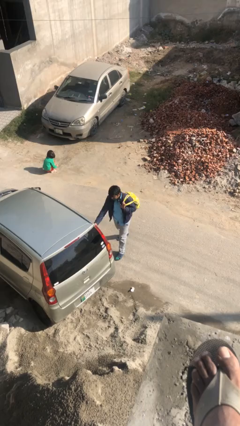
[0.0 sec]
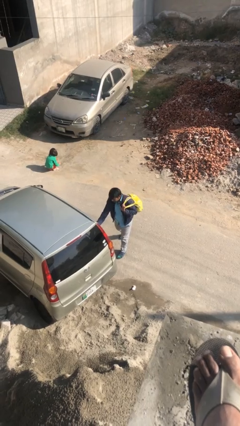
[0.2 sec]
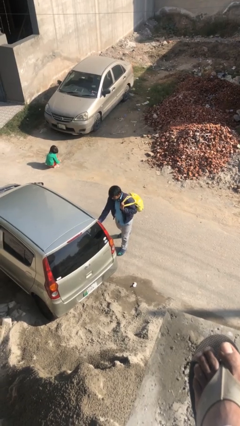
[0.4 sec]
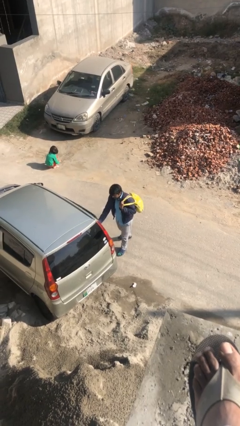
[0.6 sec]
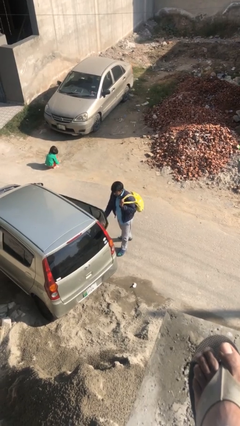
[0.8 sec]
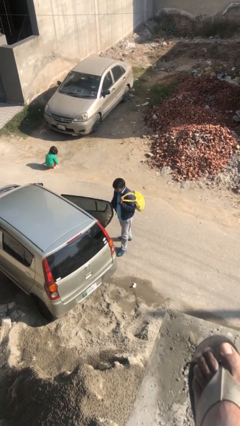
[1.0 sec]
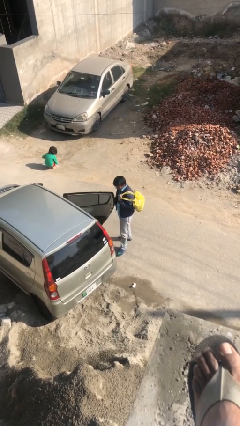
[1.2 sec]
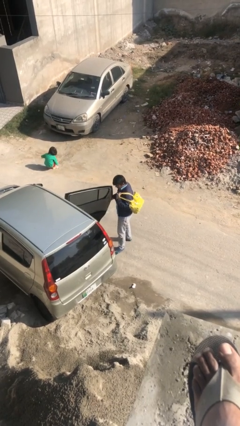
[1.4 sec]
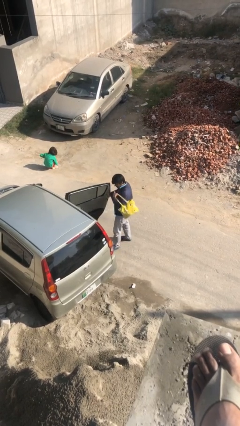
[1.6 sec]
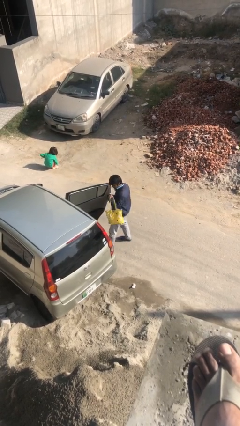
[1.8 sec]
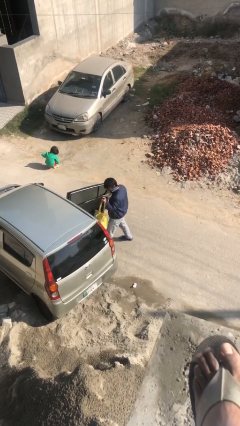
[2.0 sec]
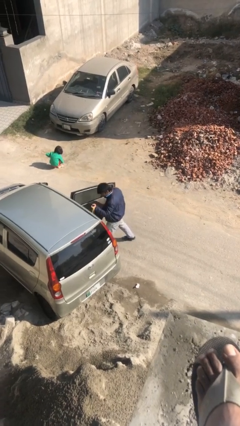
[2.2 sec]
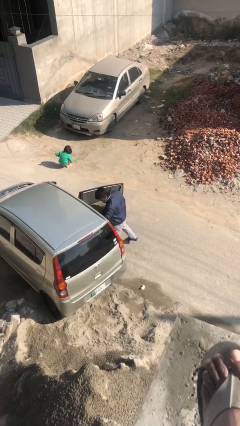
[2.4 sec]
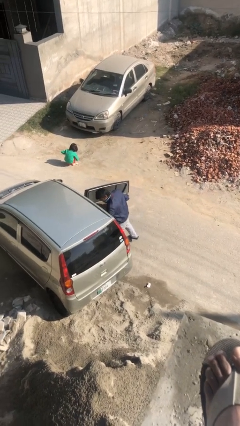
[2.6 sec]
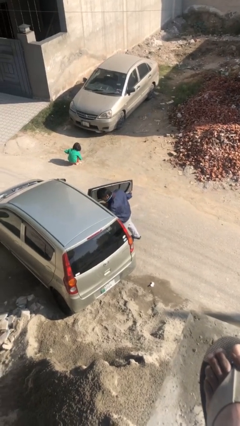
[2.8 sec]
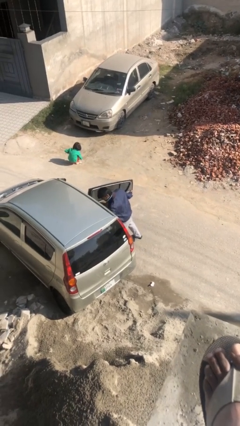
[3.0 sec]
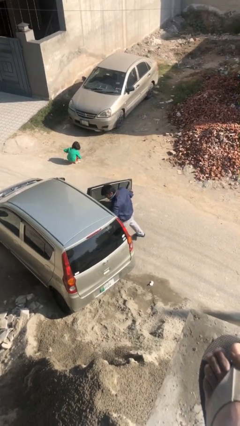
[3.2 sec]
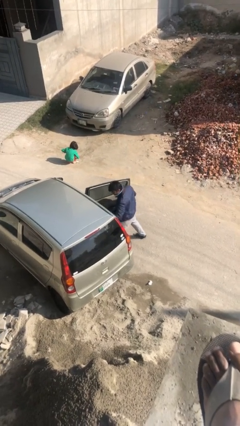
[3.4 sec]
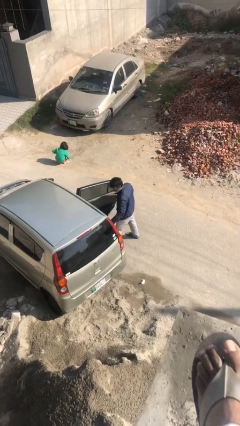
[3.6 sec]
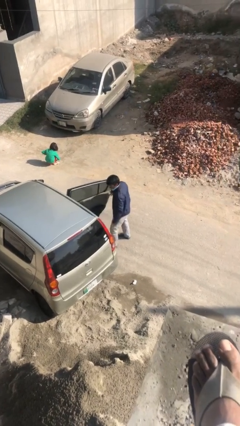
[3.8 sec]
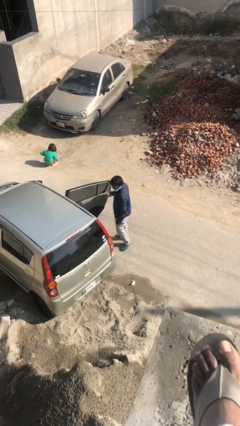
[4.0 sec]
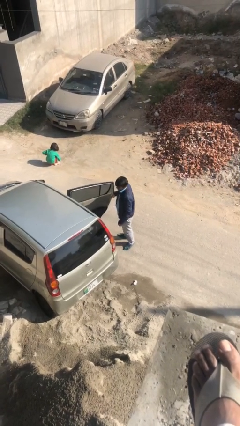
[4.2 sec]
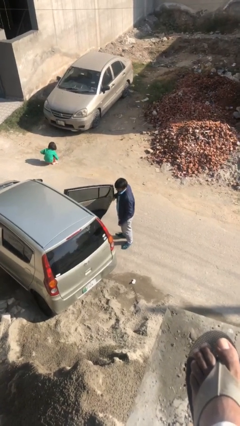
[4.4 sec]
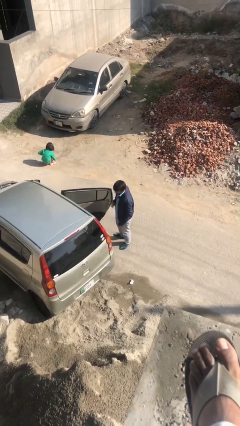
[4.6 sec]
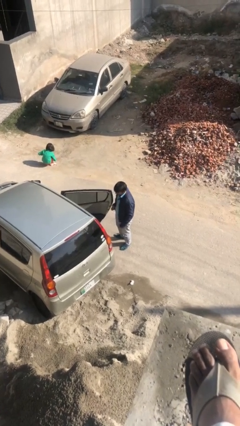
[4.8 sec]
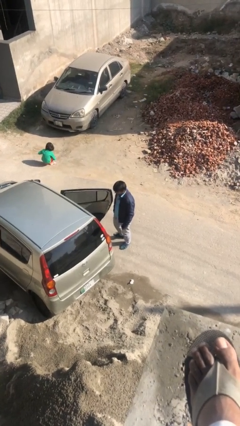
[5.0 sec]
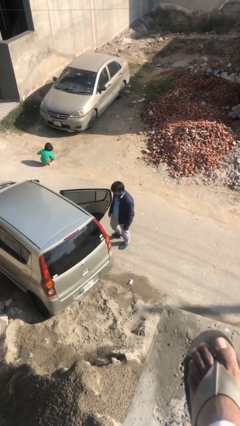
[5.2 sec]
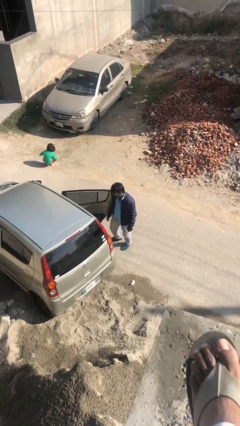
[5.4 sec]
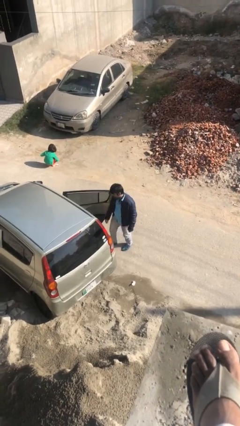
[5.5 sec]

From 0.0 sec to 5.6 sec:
person loads car

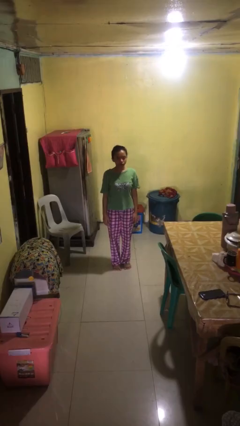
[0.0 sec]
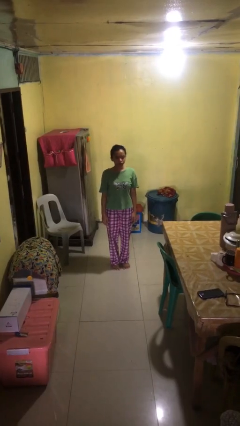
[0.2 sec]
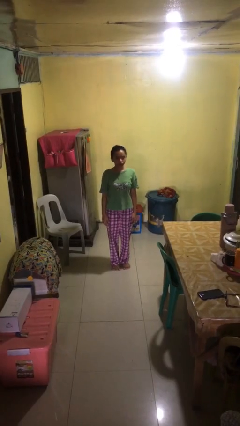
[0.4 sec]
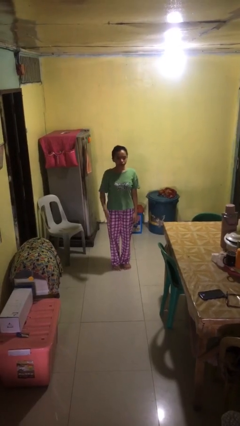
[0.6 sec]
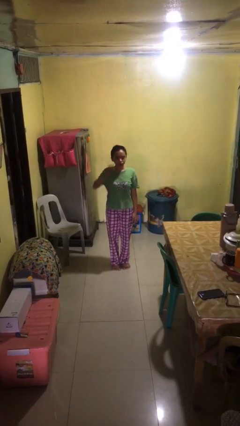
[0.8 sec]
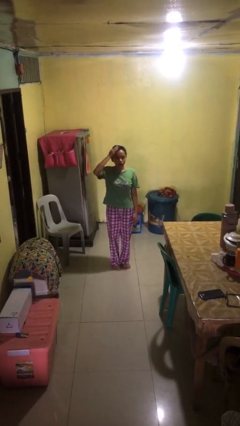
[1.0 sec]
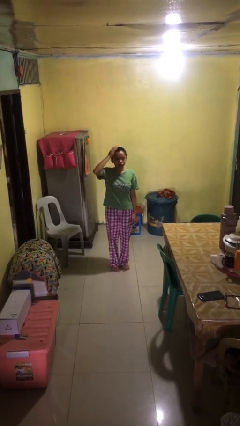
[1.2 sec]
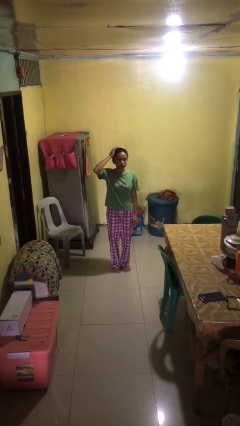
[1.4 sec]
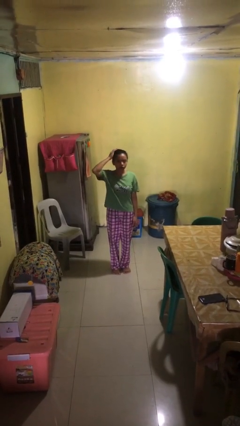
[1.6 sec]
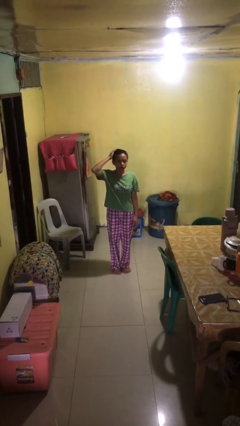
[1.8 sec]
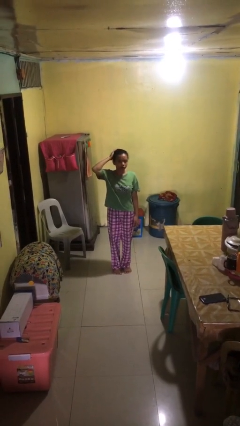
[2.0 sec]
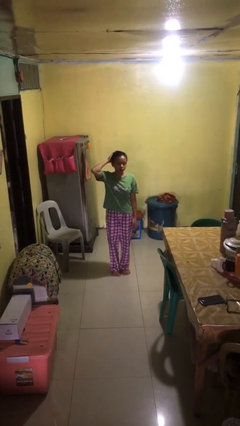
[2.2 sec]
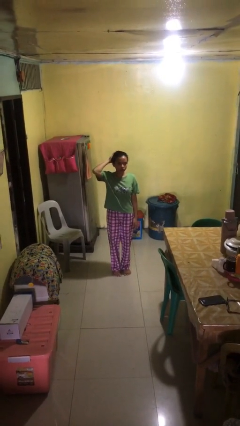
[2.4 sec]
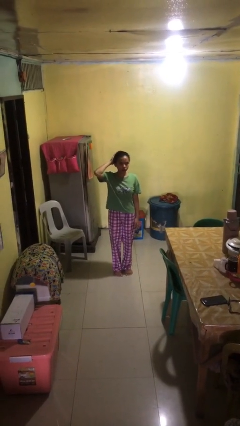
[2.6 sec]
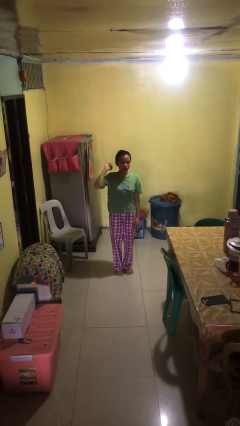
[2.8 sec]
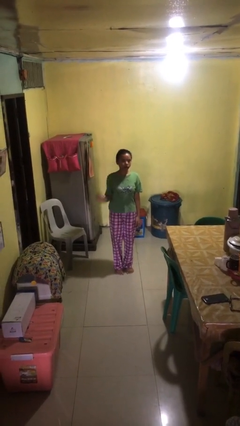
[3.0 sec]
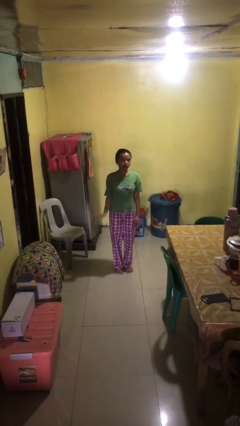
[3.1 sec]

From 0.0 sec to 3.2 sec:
person pats head

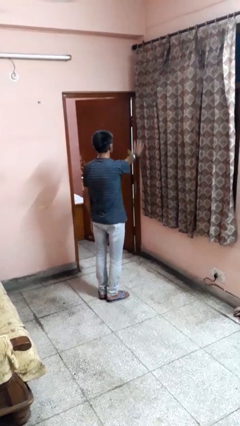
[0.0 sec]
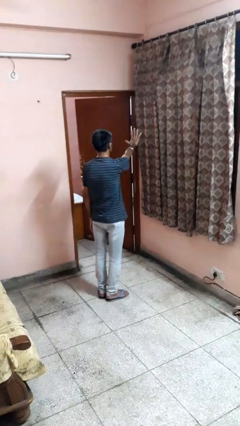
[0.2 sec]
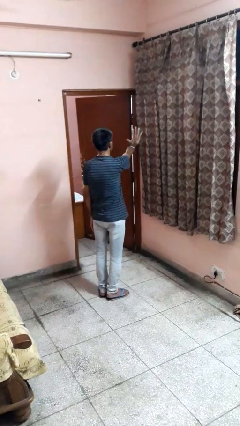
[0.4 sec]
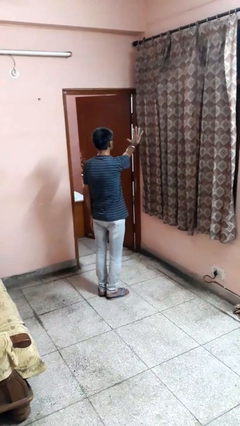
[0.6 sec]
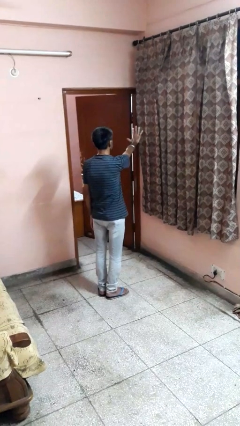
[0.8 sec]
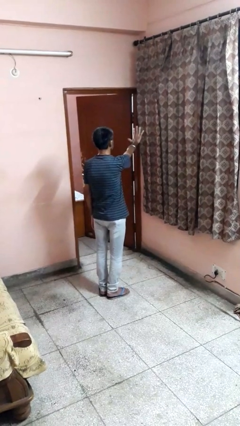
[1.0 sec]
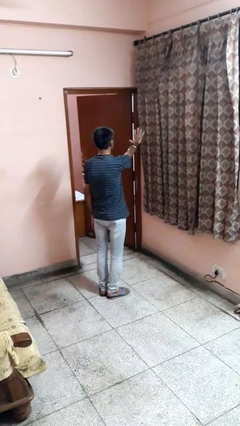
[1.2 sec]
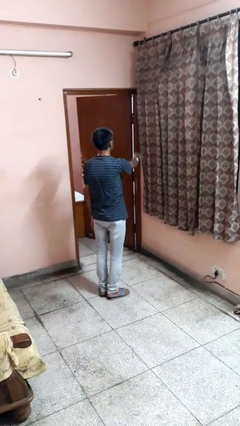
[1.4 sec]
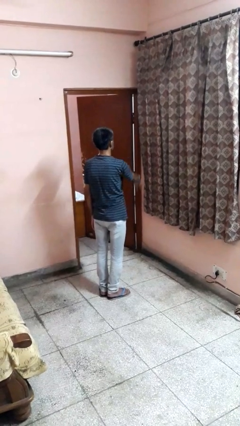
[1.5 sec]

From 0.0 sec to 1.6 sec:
person gestures number five

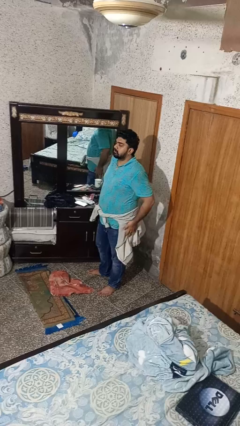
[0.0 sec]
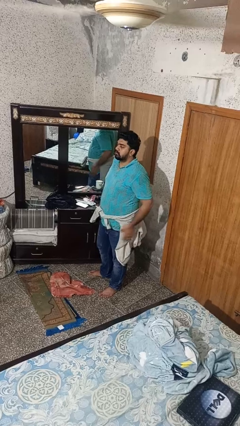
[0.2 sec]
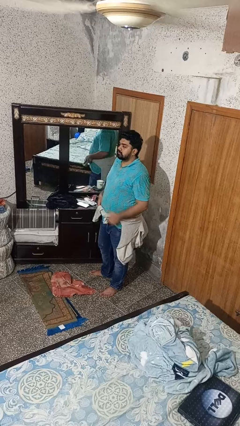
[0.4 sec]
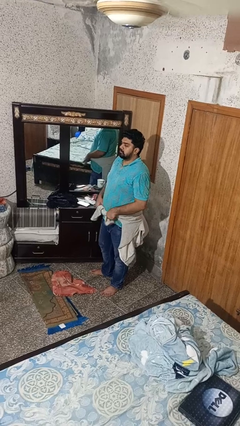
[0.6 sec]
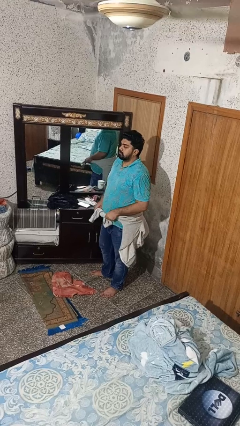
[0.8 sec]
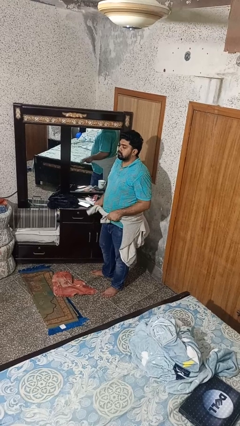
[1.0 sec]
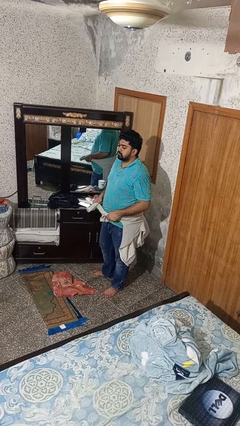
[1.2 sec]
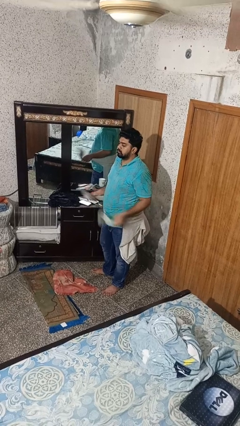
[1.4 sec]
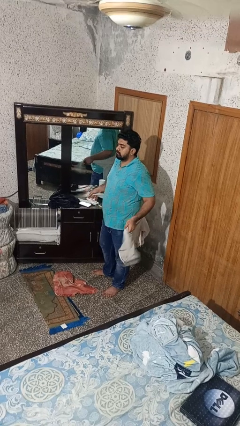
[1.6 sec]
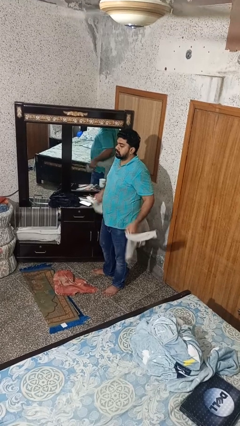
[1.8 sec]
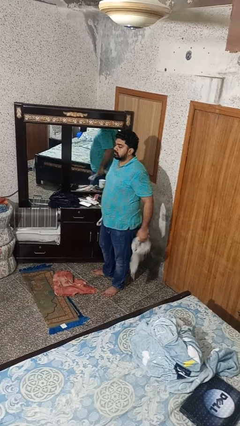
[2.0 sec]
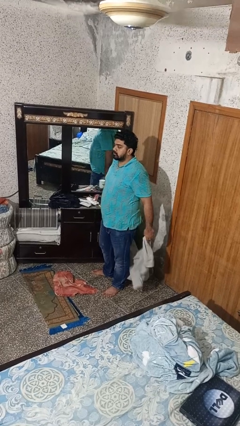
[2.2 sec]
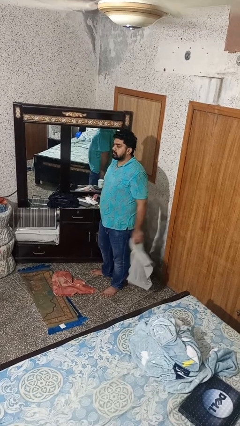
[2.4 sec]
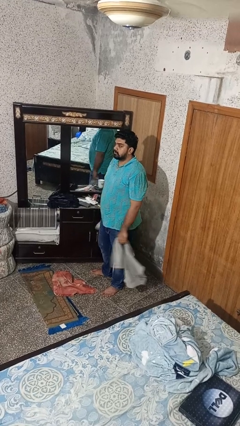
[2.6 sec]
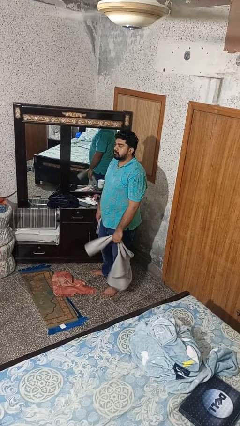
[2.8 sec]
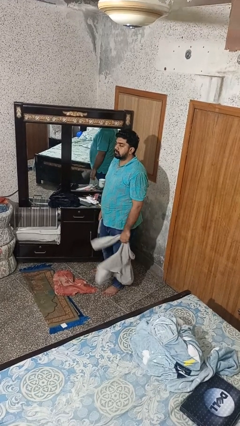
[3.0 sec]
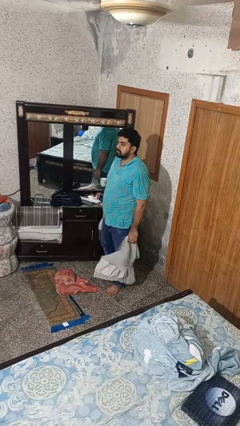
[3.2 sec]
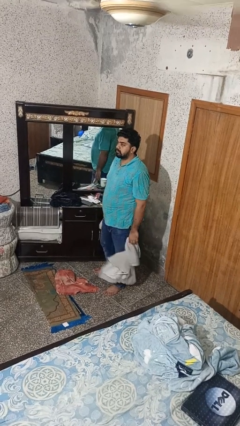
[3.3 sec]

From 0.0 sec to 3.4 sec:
person unties jacket around waist

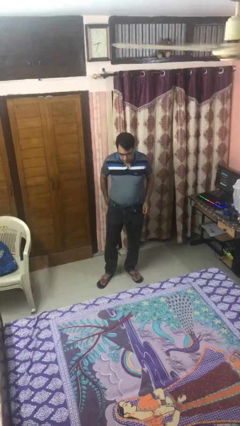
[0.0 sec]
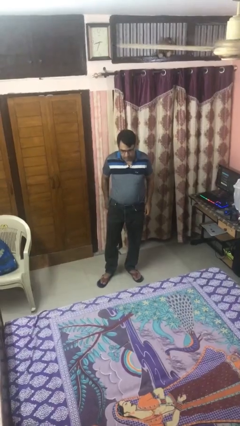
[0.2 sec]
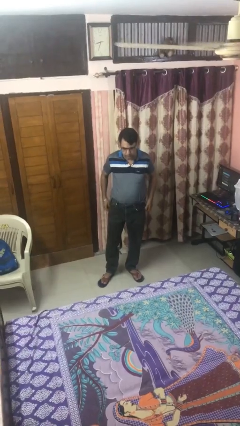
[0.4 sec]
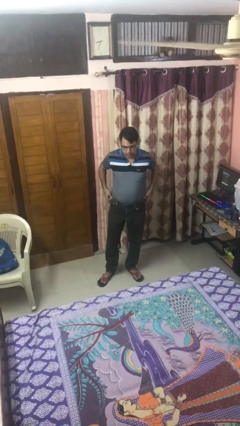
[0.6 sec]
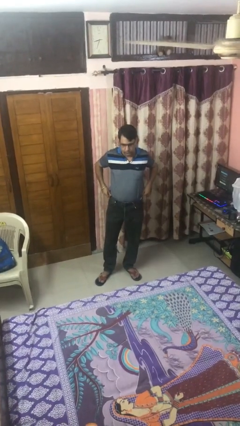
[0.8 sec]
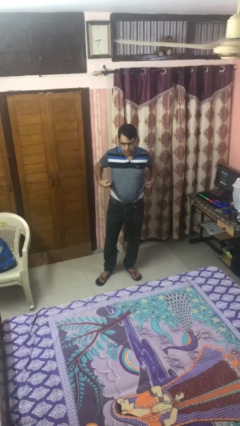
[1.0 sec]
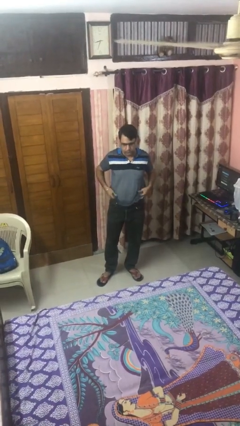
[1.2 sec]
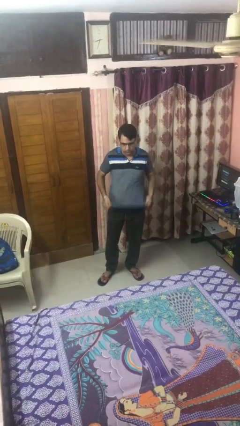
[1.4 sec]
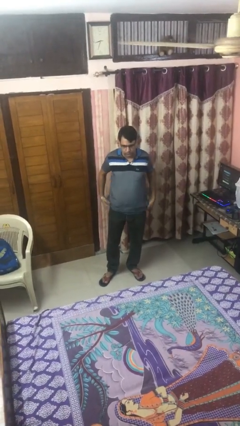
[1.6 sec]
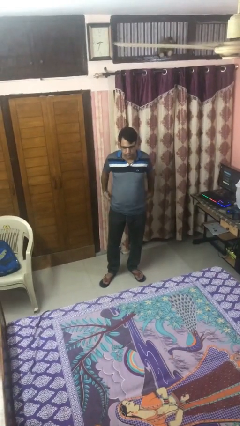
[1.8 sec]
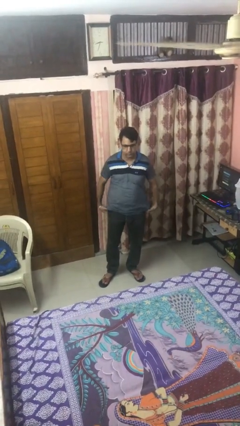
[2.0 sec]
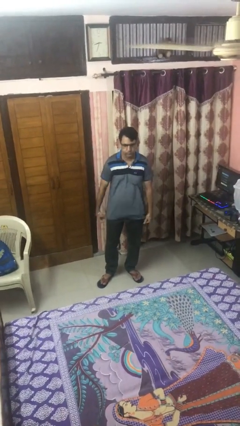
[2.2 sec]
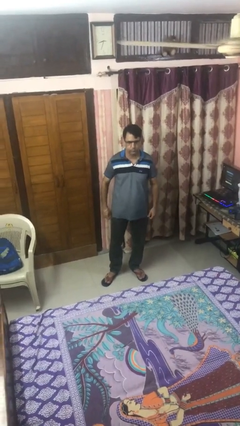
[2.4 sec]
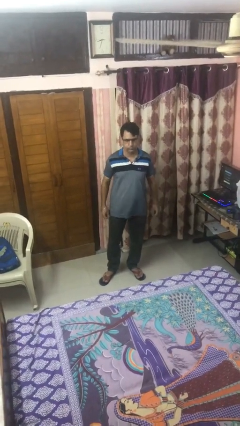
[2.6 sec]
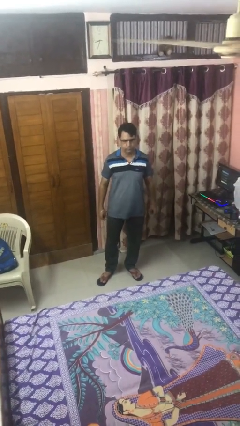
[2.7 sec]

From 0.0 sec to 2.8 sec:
person untucks shirt

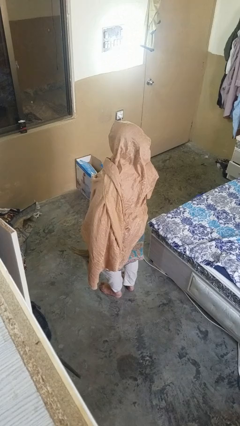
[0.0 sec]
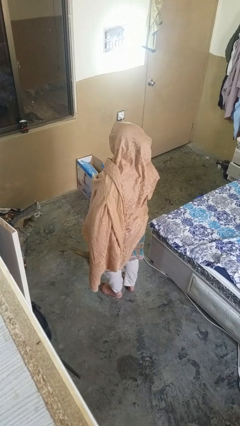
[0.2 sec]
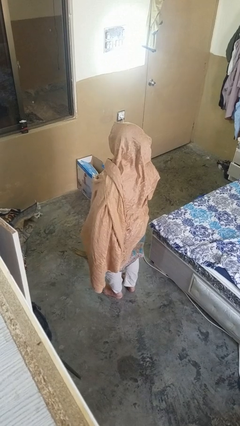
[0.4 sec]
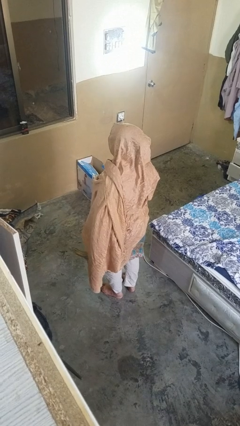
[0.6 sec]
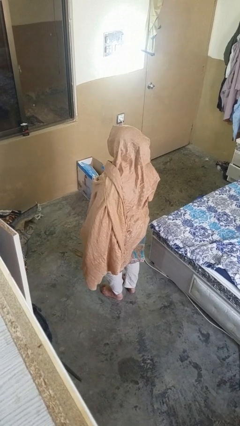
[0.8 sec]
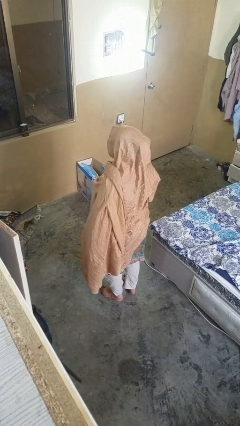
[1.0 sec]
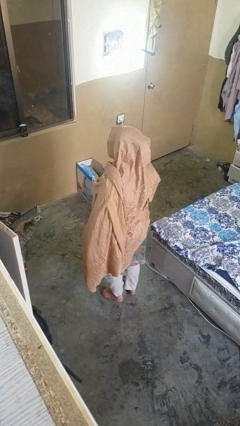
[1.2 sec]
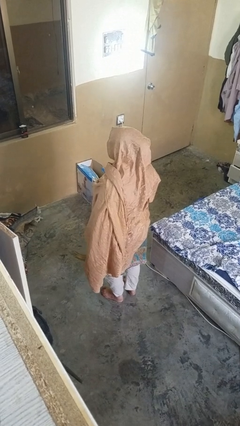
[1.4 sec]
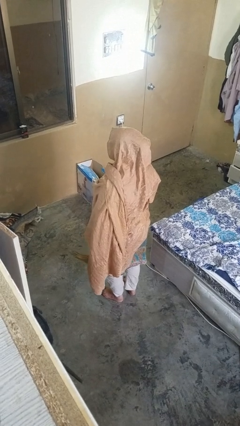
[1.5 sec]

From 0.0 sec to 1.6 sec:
person sweeps floor
